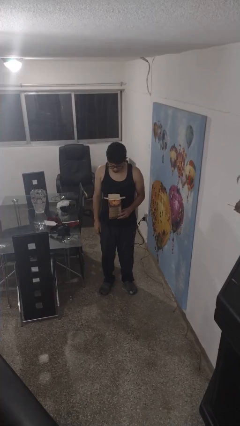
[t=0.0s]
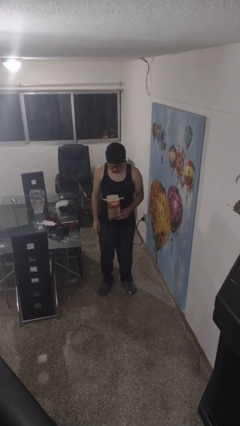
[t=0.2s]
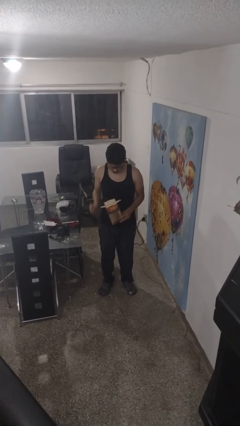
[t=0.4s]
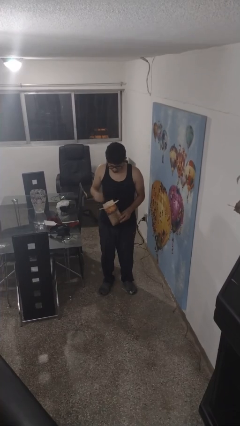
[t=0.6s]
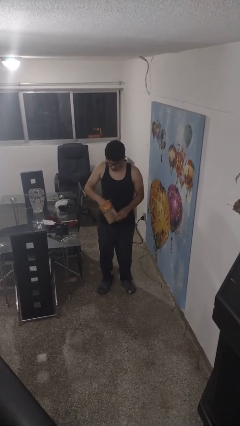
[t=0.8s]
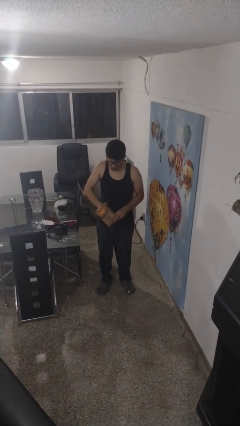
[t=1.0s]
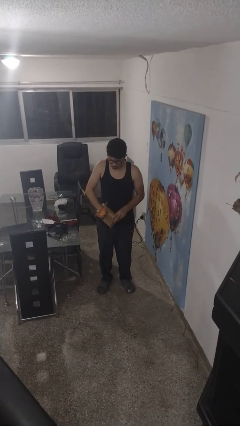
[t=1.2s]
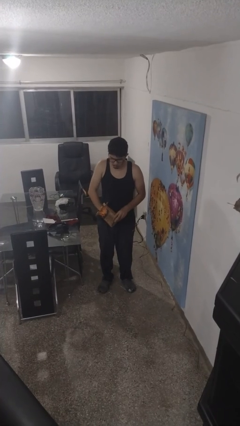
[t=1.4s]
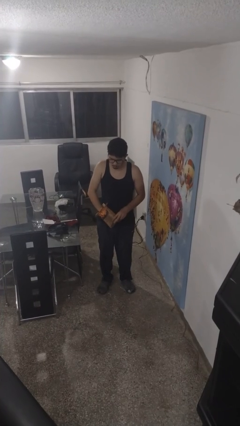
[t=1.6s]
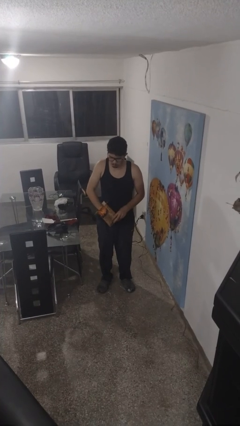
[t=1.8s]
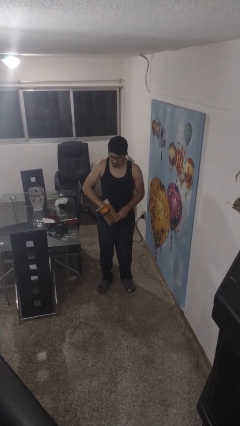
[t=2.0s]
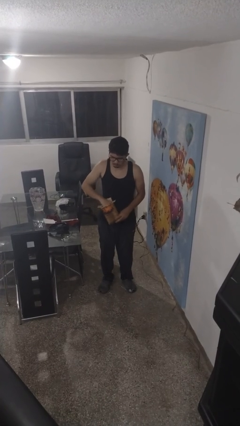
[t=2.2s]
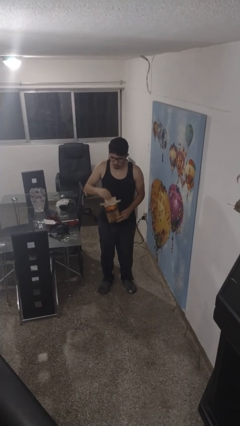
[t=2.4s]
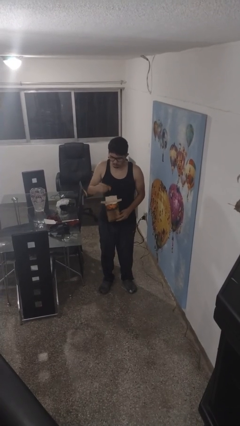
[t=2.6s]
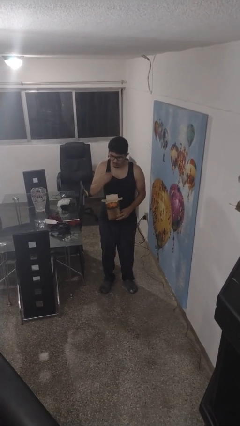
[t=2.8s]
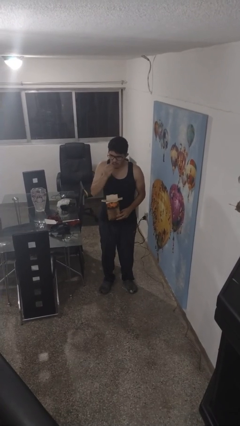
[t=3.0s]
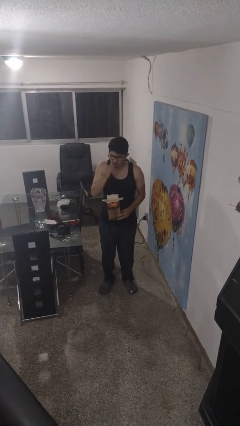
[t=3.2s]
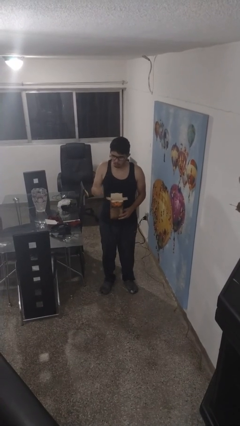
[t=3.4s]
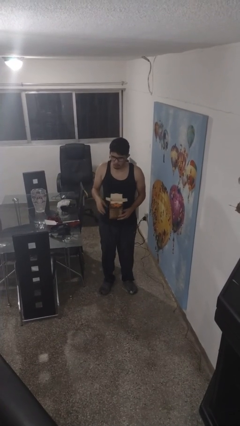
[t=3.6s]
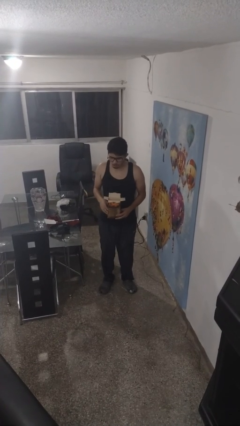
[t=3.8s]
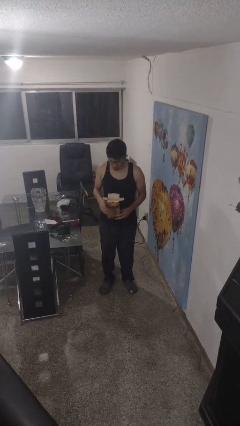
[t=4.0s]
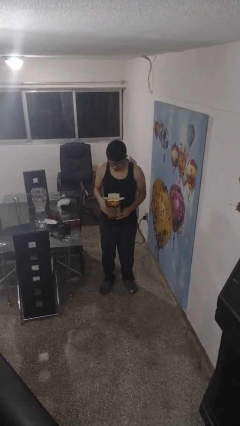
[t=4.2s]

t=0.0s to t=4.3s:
person eats snack from bag

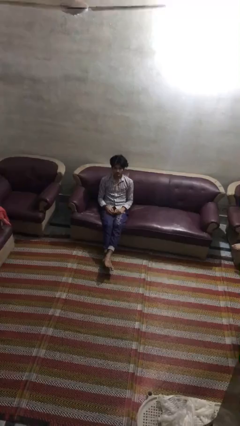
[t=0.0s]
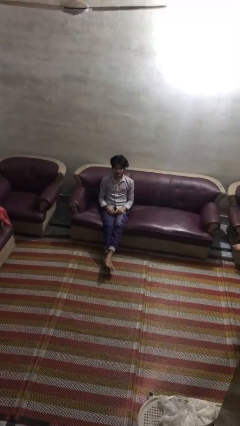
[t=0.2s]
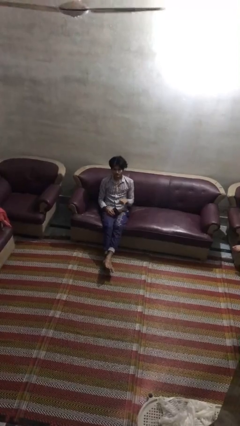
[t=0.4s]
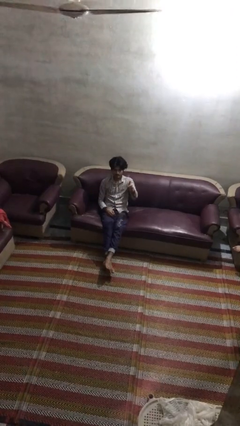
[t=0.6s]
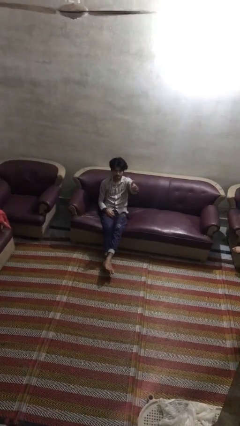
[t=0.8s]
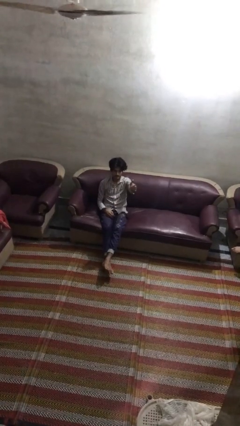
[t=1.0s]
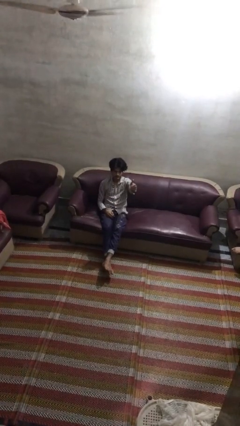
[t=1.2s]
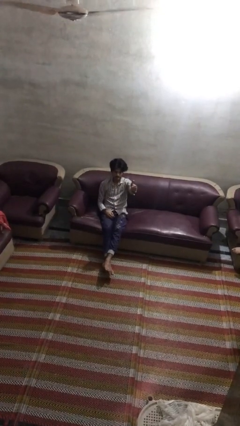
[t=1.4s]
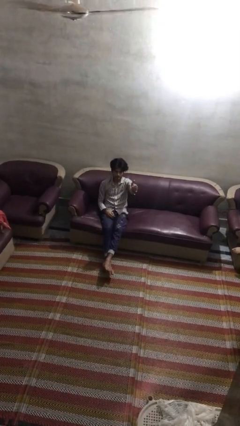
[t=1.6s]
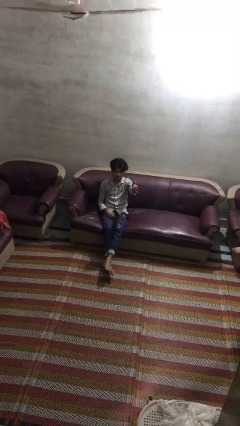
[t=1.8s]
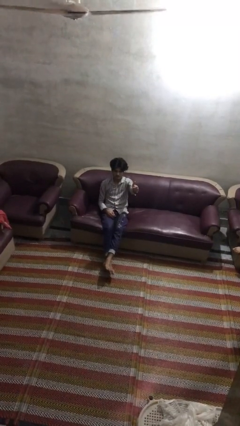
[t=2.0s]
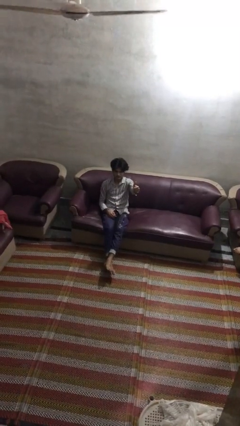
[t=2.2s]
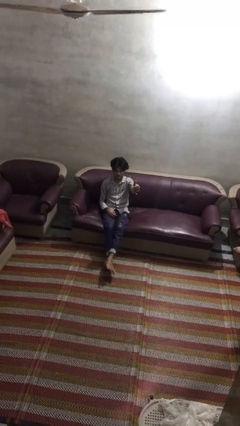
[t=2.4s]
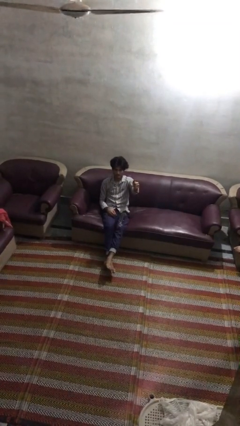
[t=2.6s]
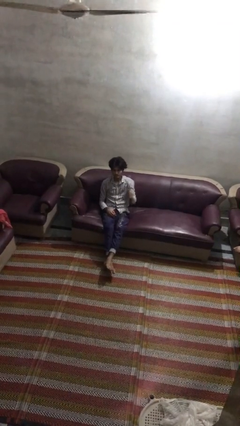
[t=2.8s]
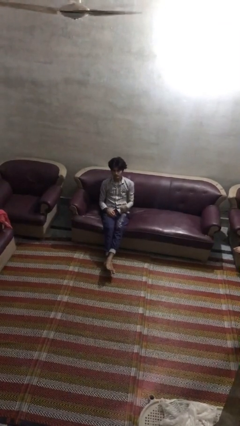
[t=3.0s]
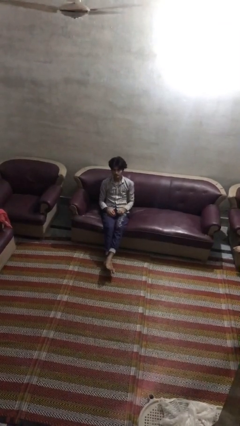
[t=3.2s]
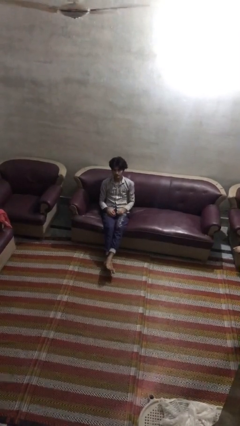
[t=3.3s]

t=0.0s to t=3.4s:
person gestures thumbs up

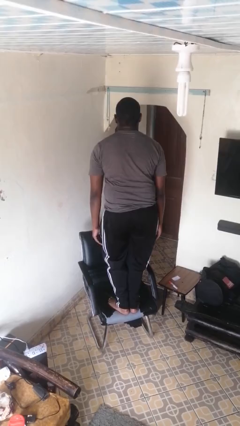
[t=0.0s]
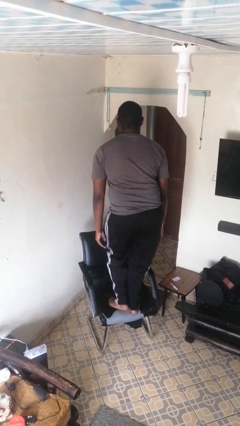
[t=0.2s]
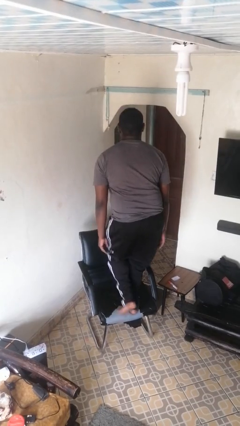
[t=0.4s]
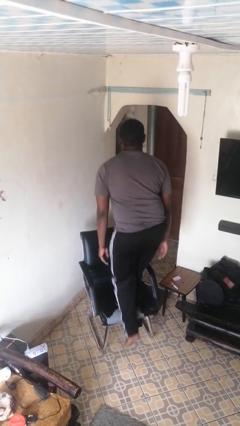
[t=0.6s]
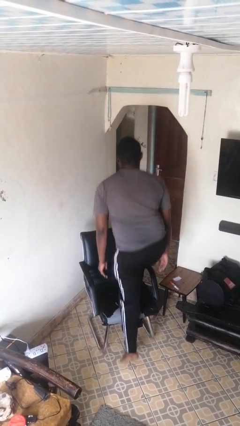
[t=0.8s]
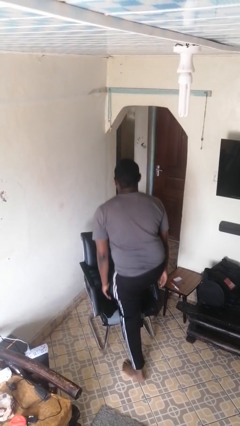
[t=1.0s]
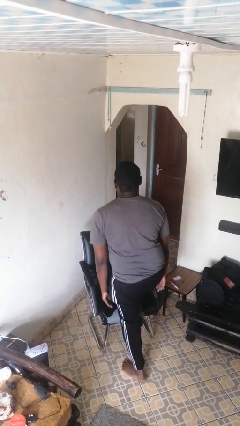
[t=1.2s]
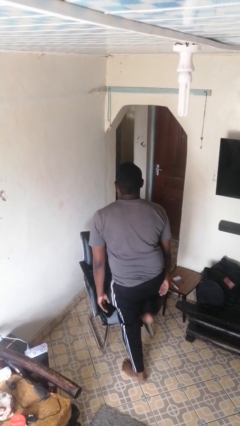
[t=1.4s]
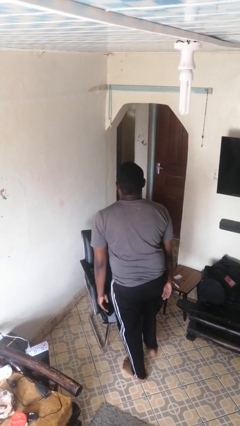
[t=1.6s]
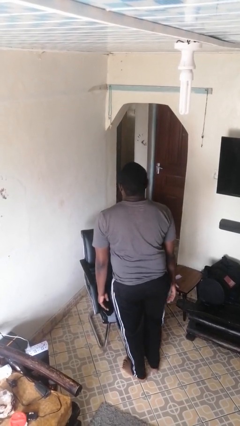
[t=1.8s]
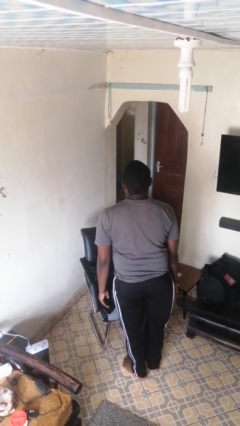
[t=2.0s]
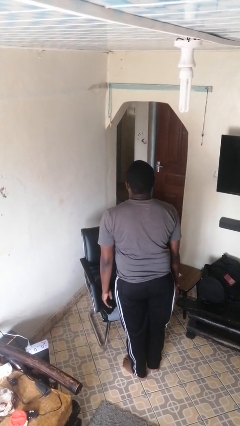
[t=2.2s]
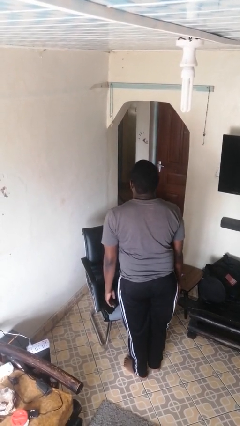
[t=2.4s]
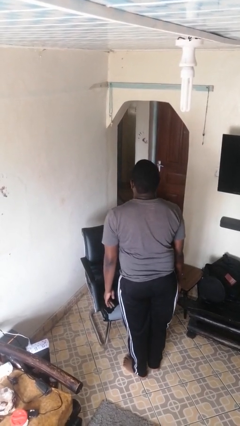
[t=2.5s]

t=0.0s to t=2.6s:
person climbs off chair

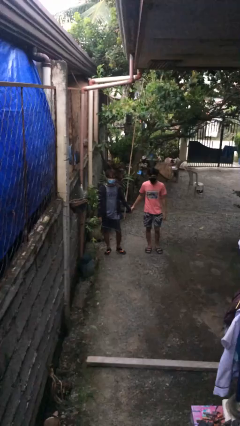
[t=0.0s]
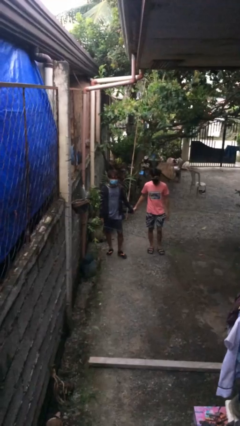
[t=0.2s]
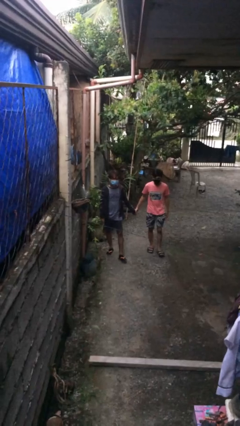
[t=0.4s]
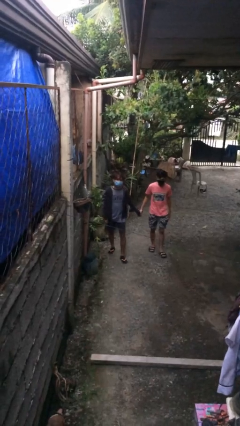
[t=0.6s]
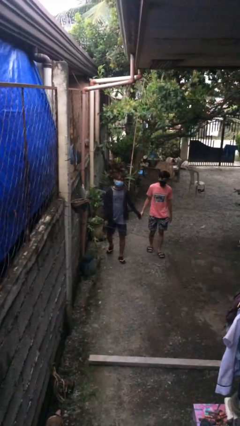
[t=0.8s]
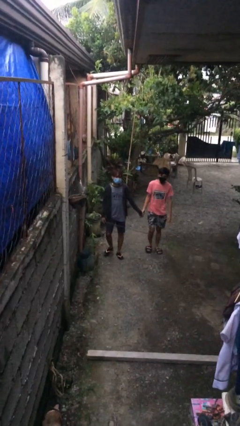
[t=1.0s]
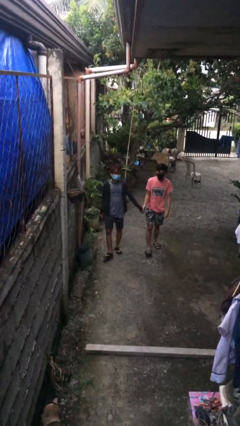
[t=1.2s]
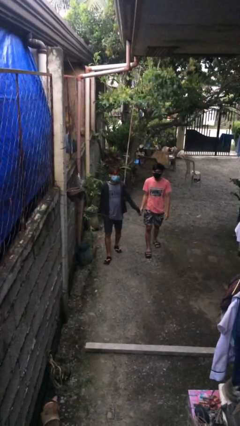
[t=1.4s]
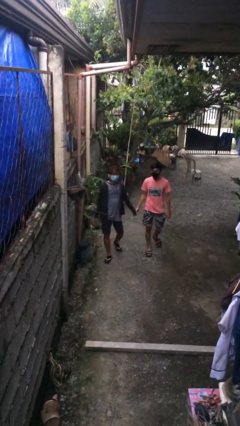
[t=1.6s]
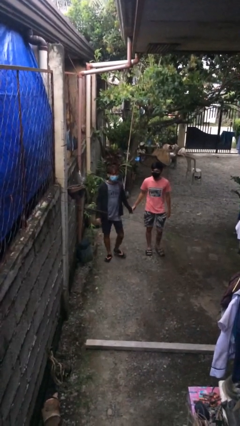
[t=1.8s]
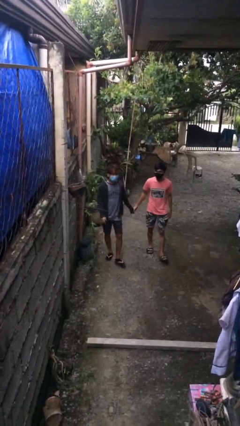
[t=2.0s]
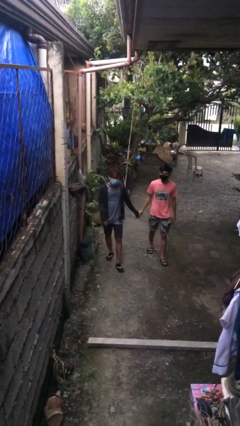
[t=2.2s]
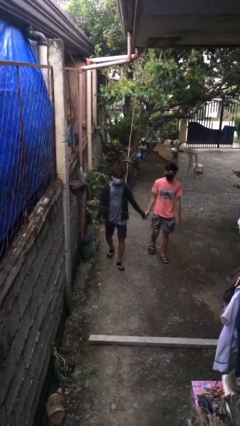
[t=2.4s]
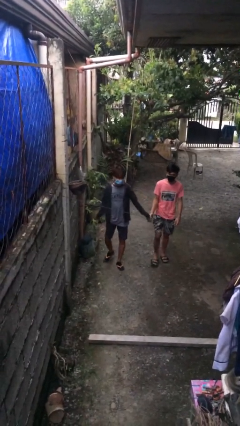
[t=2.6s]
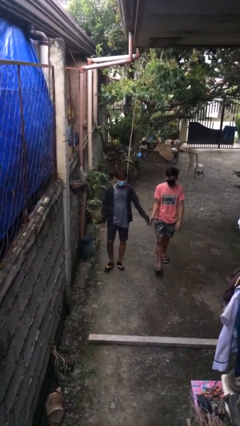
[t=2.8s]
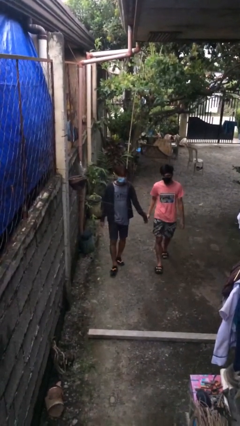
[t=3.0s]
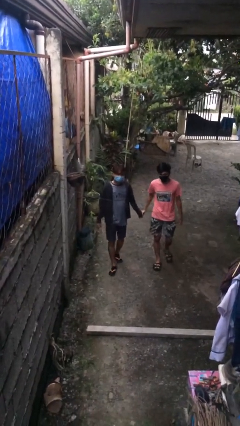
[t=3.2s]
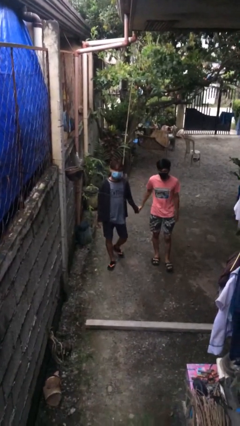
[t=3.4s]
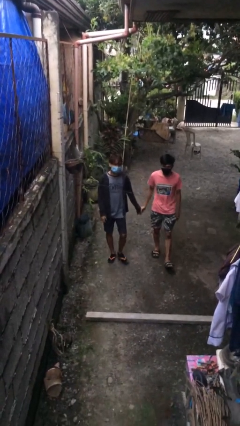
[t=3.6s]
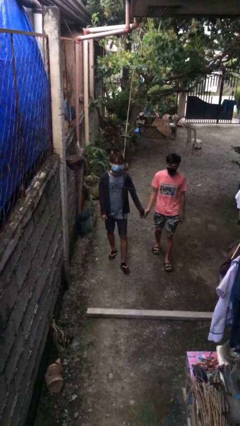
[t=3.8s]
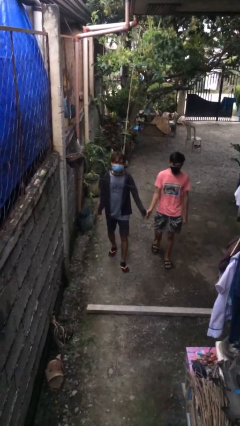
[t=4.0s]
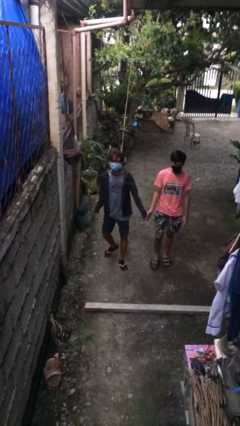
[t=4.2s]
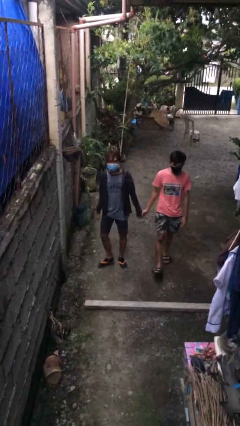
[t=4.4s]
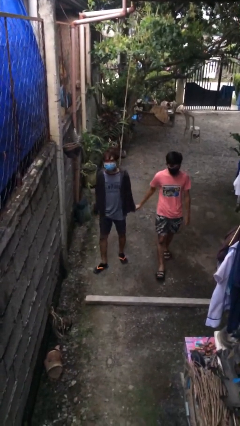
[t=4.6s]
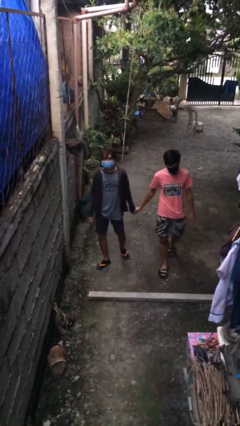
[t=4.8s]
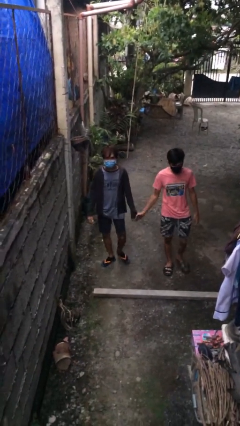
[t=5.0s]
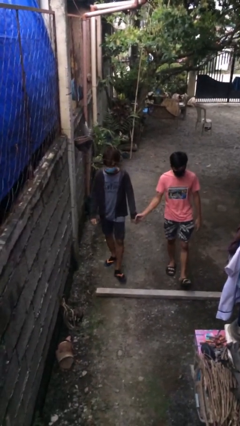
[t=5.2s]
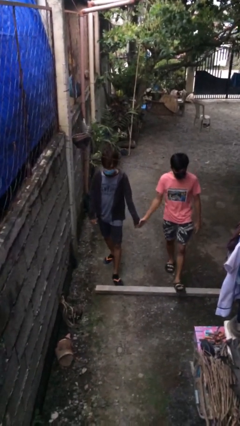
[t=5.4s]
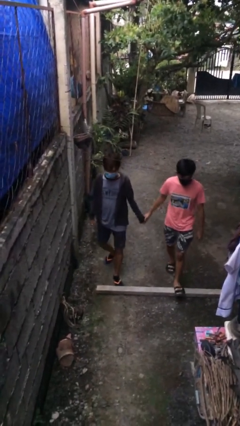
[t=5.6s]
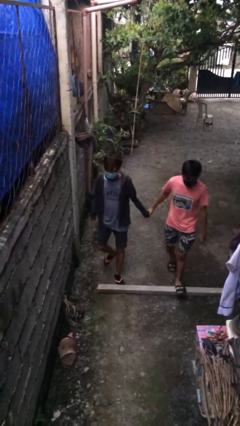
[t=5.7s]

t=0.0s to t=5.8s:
person holds hand

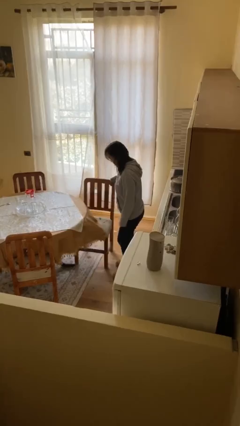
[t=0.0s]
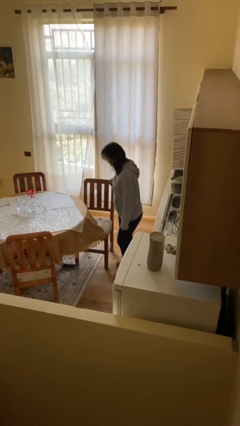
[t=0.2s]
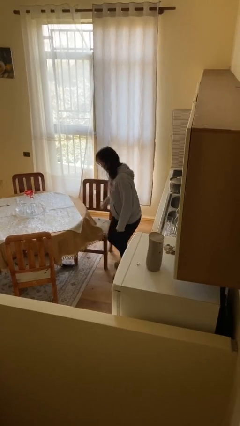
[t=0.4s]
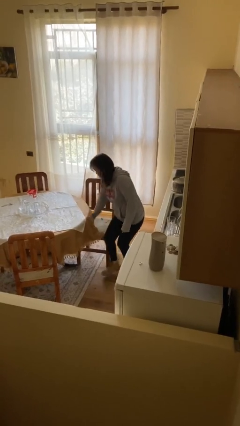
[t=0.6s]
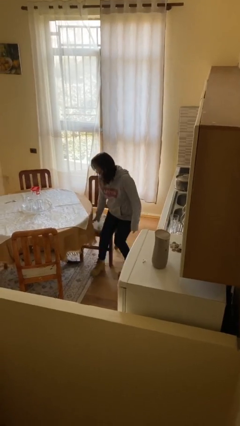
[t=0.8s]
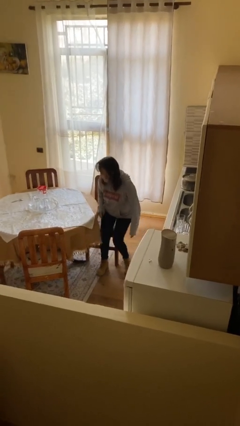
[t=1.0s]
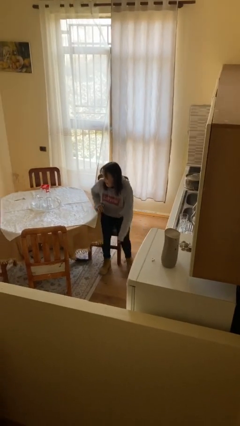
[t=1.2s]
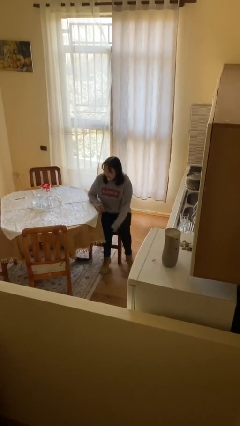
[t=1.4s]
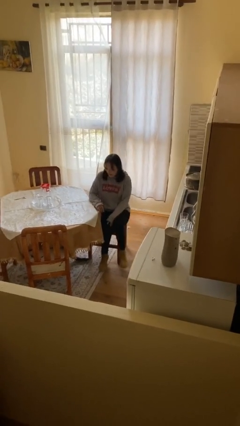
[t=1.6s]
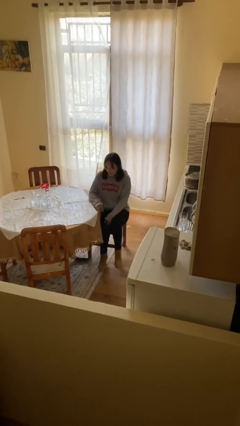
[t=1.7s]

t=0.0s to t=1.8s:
person sits down
